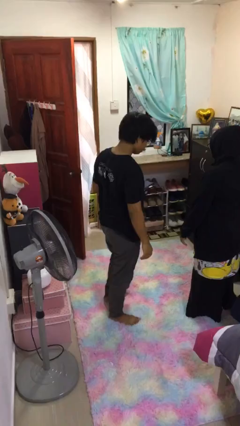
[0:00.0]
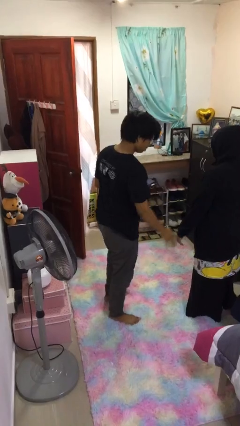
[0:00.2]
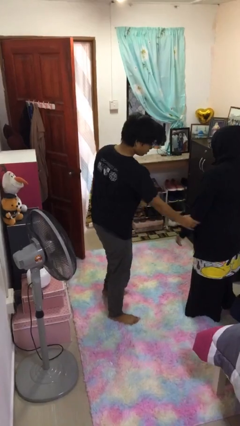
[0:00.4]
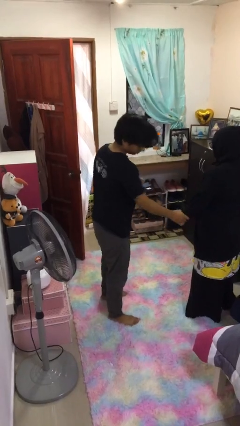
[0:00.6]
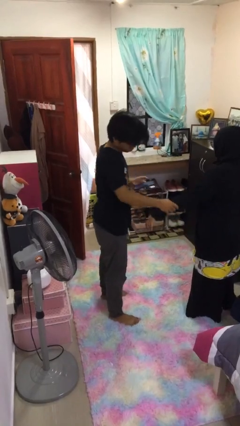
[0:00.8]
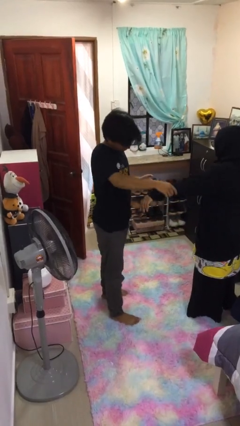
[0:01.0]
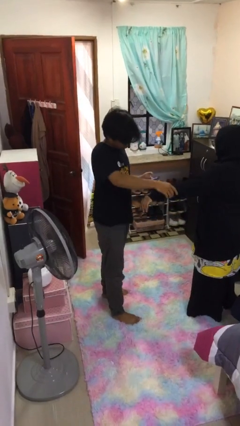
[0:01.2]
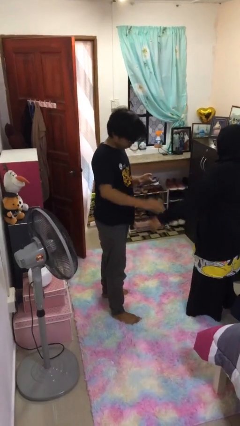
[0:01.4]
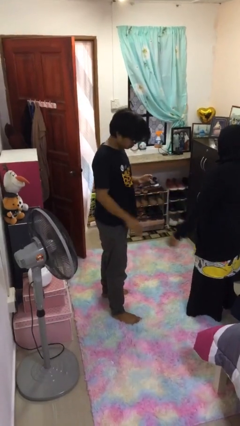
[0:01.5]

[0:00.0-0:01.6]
person grabs person by forearm

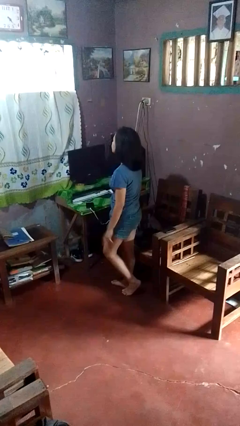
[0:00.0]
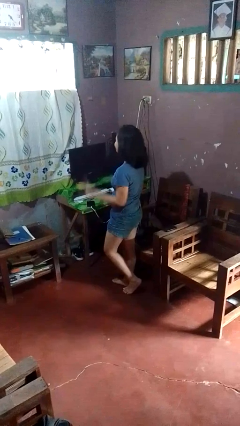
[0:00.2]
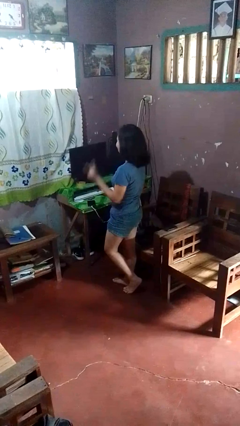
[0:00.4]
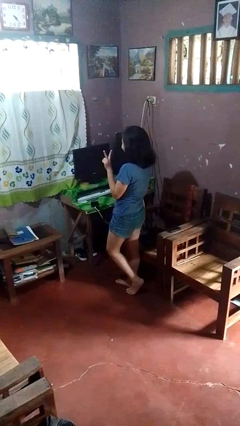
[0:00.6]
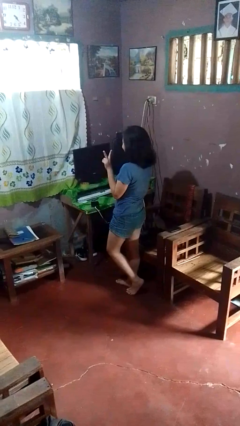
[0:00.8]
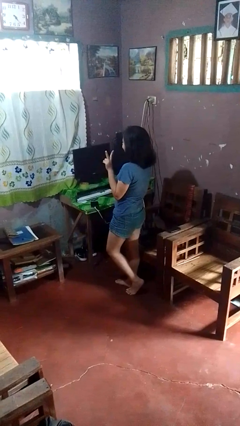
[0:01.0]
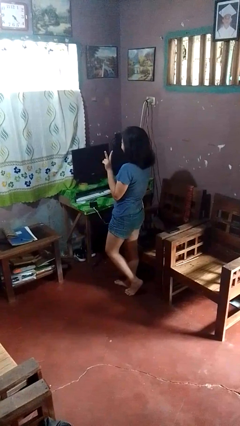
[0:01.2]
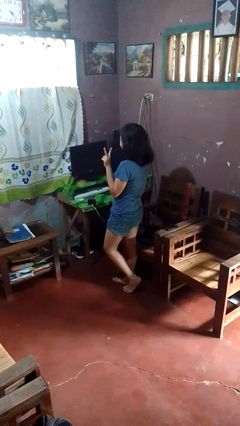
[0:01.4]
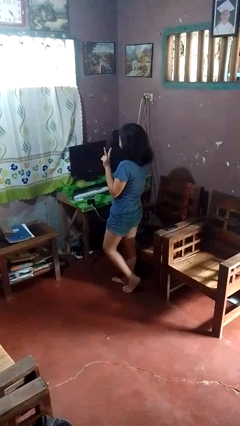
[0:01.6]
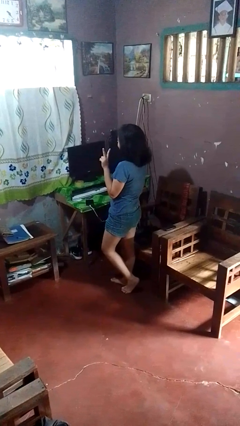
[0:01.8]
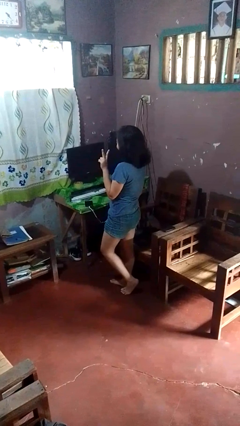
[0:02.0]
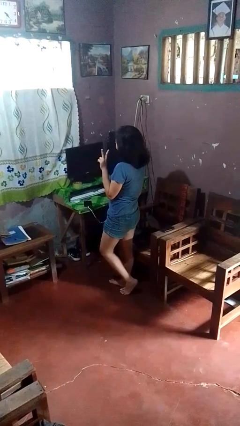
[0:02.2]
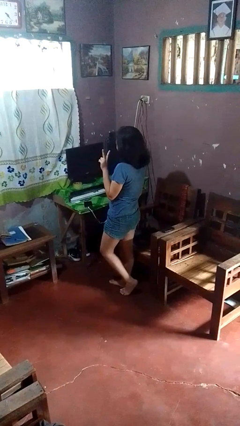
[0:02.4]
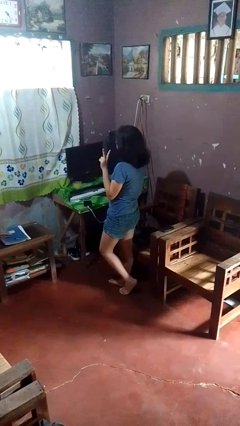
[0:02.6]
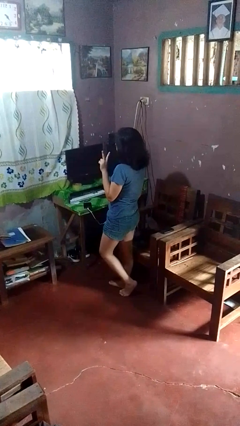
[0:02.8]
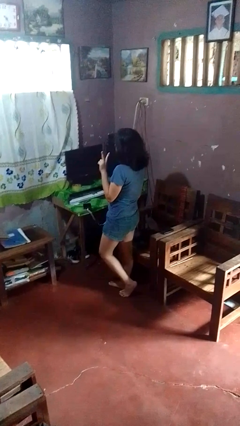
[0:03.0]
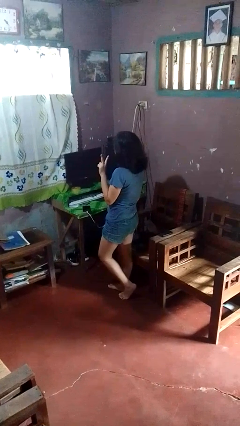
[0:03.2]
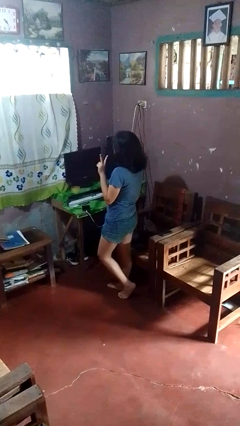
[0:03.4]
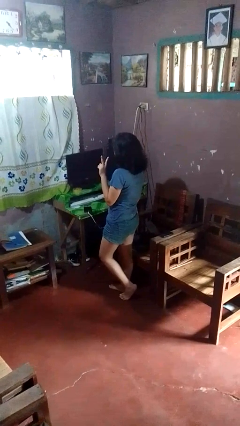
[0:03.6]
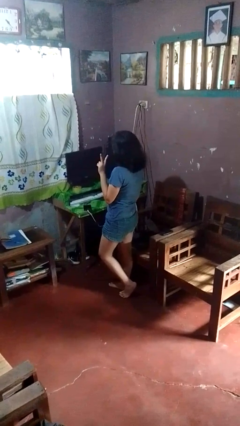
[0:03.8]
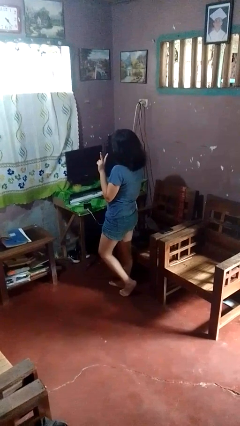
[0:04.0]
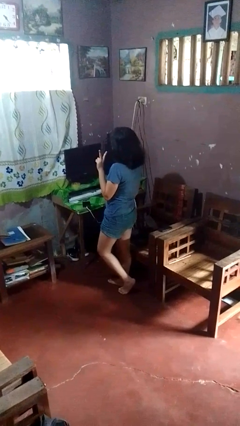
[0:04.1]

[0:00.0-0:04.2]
person gestures peace

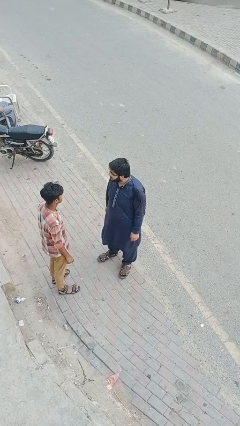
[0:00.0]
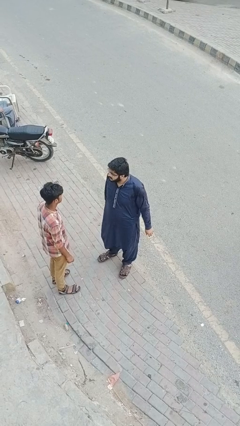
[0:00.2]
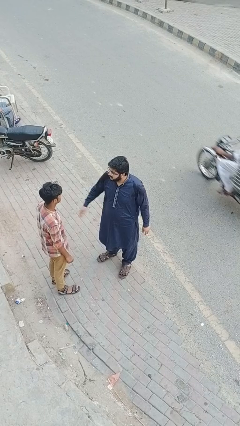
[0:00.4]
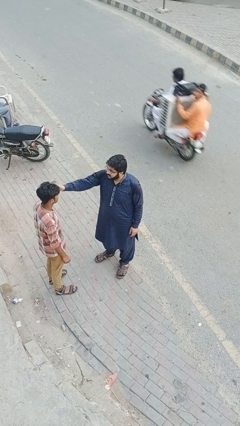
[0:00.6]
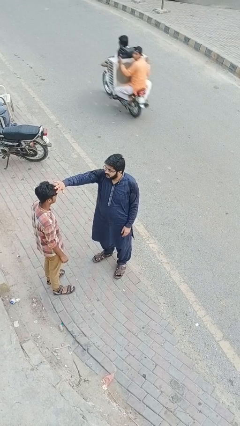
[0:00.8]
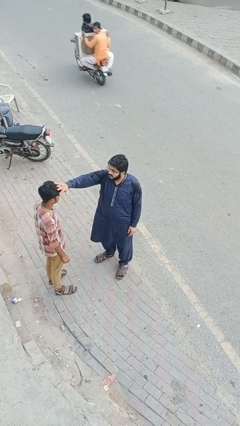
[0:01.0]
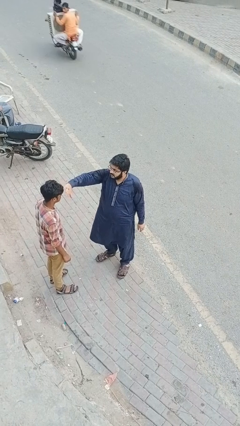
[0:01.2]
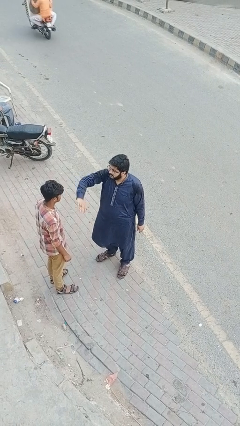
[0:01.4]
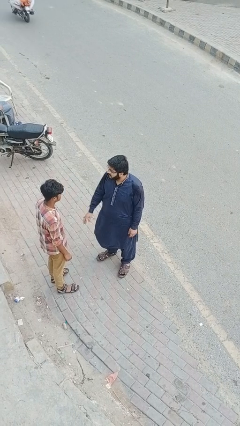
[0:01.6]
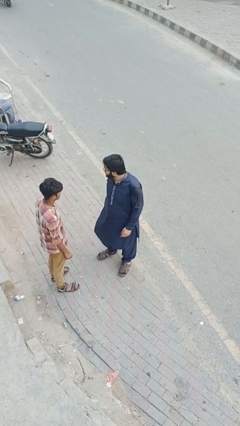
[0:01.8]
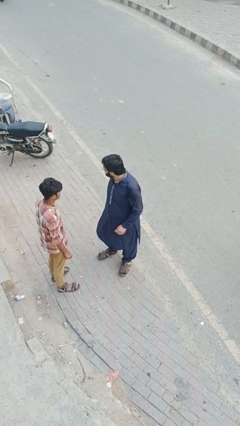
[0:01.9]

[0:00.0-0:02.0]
person grabs person by hair

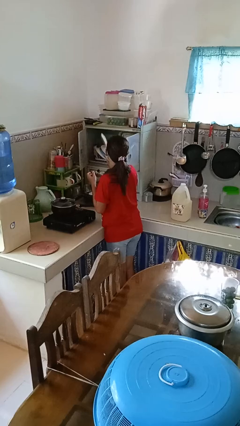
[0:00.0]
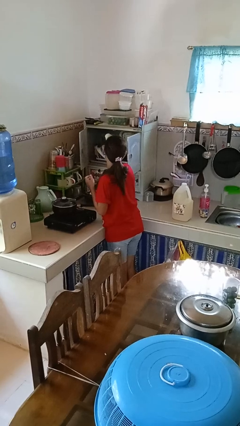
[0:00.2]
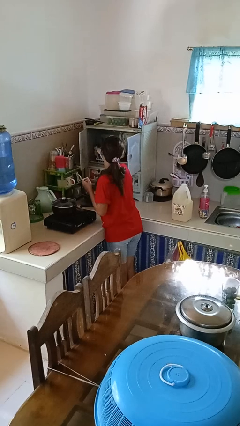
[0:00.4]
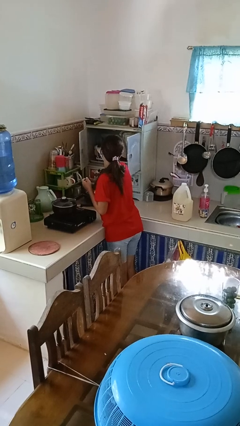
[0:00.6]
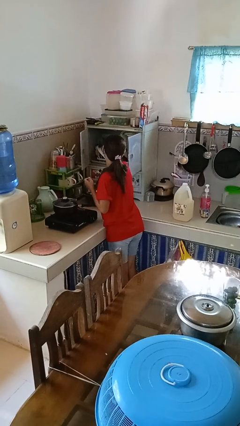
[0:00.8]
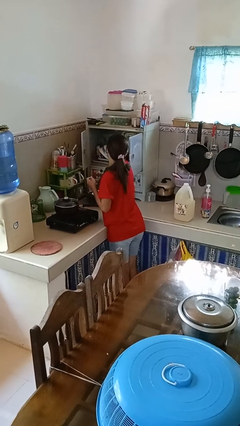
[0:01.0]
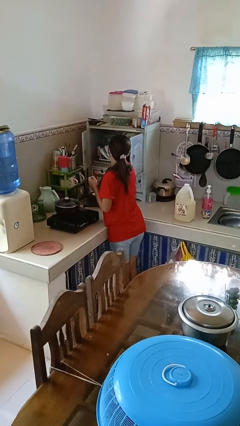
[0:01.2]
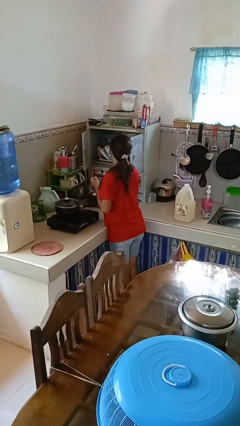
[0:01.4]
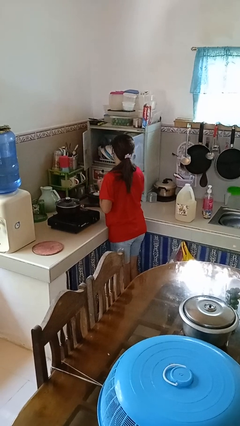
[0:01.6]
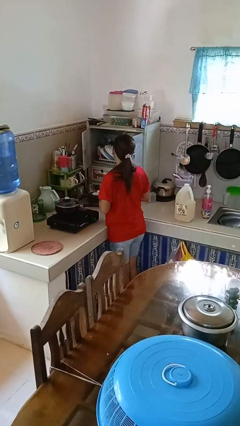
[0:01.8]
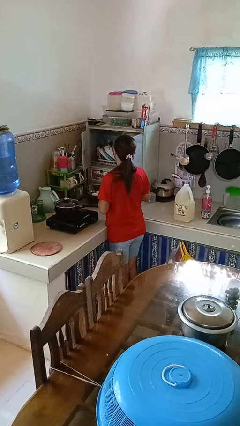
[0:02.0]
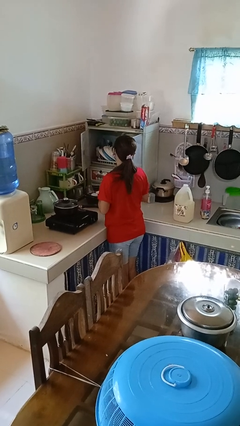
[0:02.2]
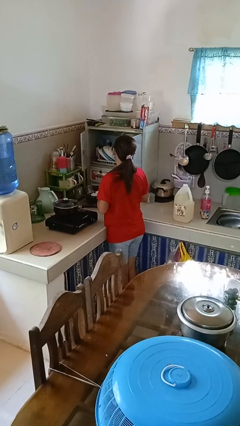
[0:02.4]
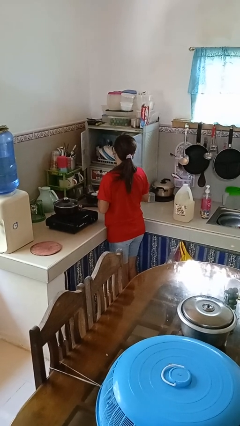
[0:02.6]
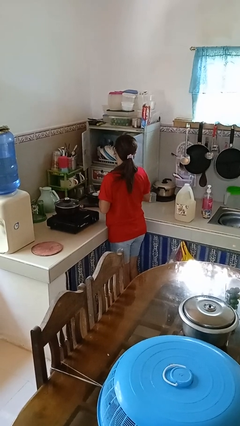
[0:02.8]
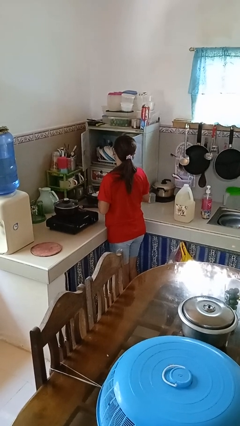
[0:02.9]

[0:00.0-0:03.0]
person puts object in cabinet

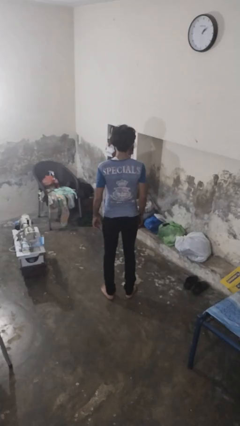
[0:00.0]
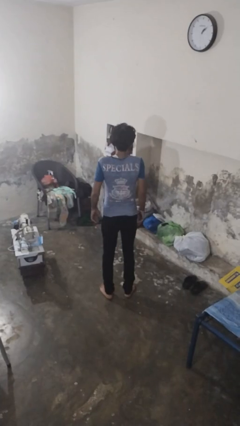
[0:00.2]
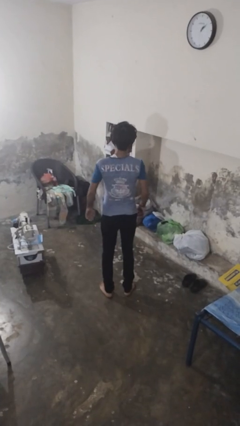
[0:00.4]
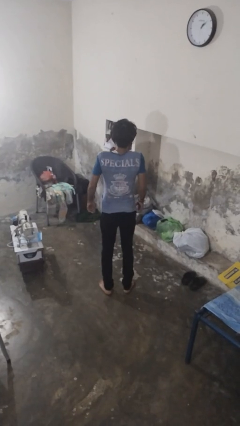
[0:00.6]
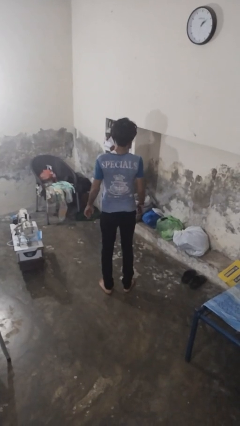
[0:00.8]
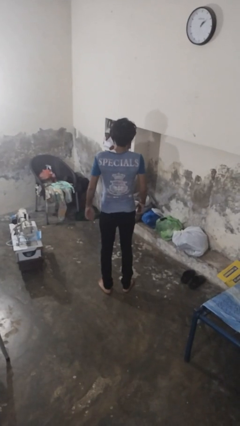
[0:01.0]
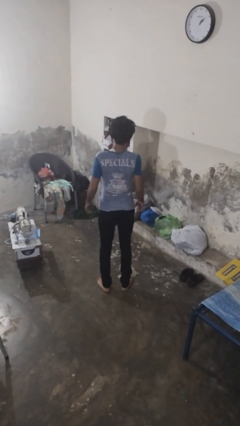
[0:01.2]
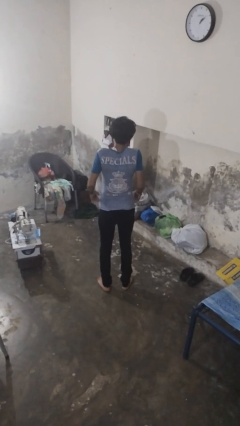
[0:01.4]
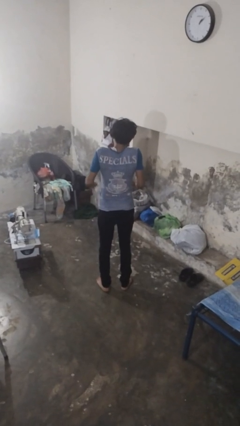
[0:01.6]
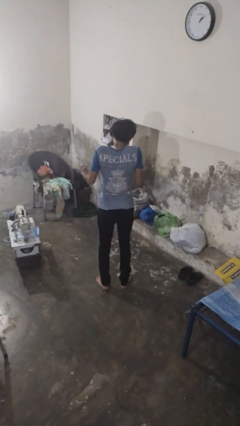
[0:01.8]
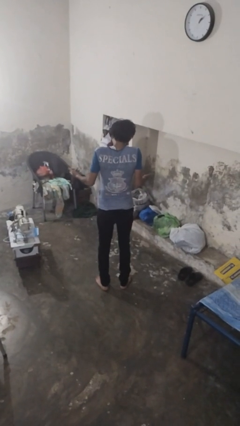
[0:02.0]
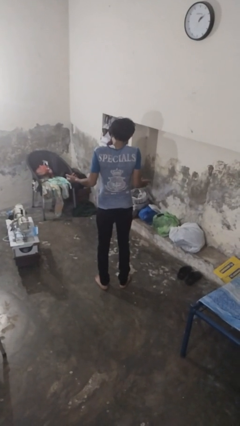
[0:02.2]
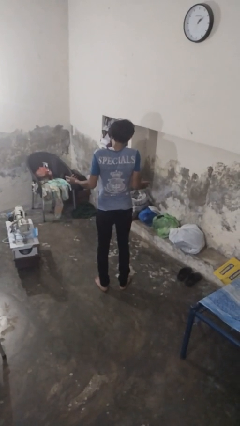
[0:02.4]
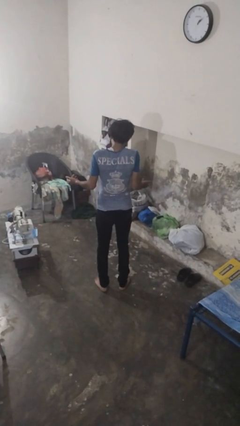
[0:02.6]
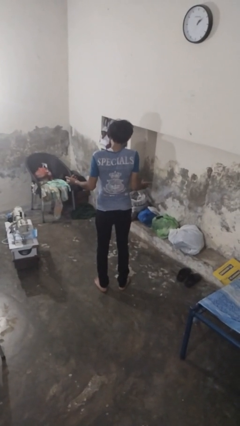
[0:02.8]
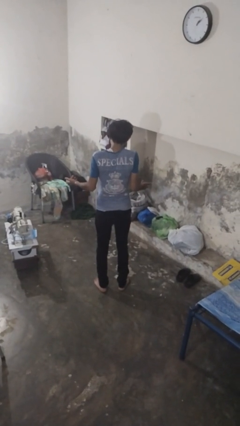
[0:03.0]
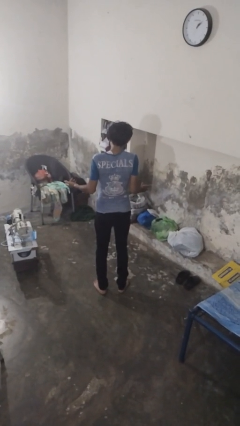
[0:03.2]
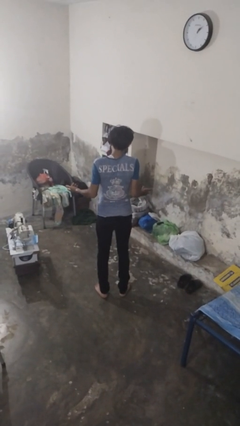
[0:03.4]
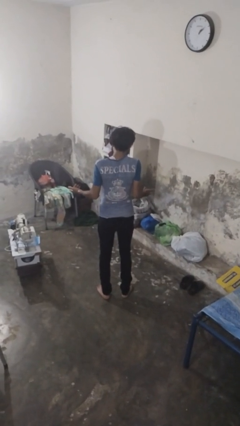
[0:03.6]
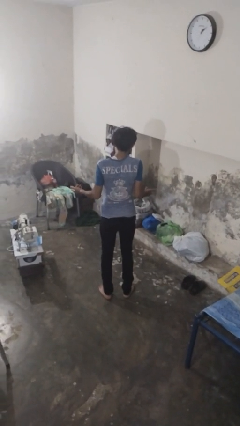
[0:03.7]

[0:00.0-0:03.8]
person shrugs

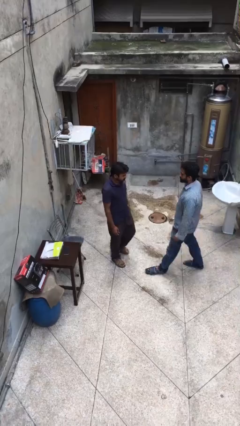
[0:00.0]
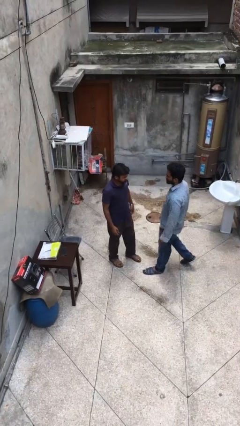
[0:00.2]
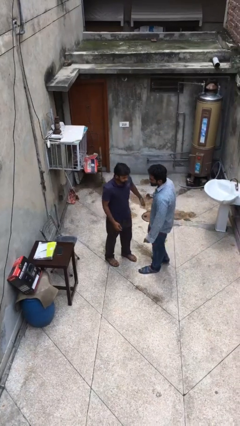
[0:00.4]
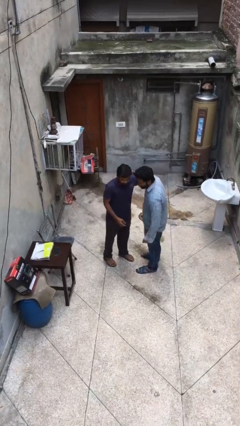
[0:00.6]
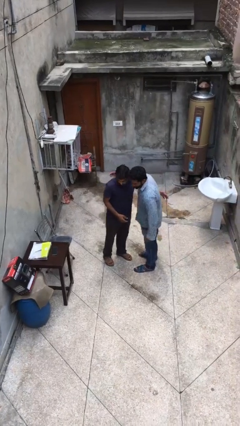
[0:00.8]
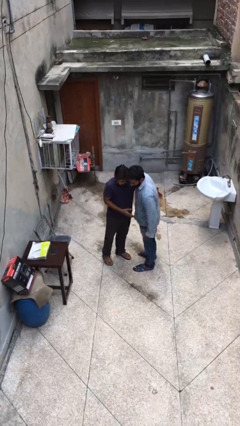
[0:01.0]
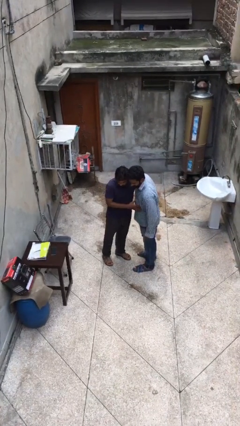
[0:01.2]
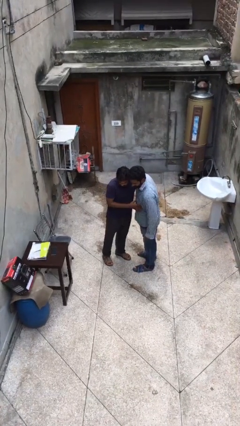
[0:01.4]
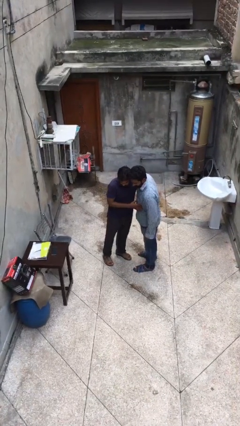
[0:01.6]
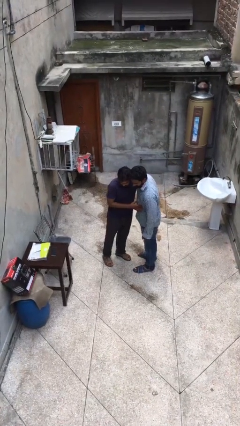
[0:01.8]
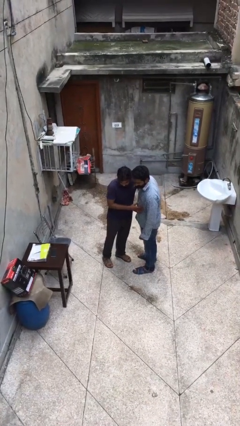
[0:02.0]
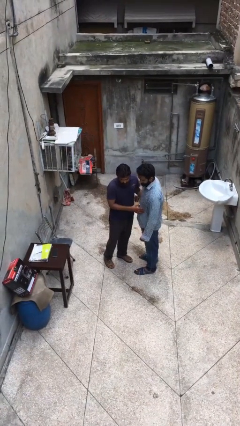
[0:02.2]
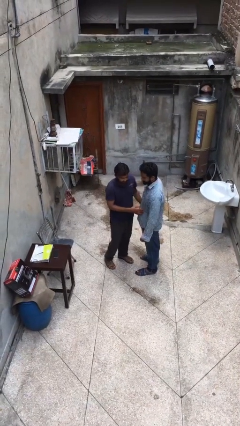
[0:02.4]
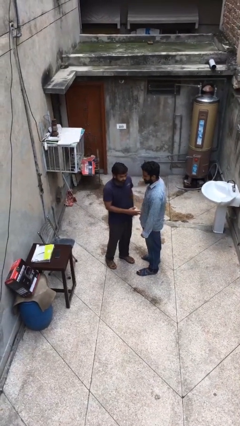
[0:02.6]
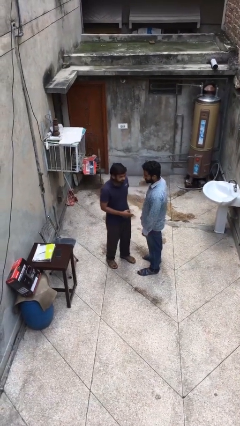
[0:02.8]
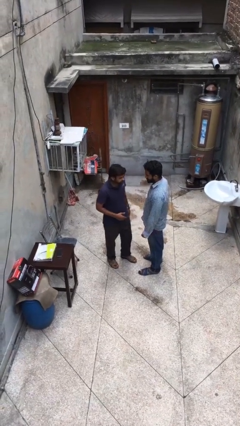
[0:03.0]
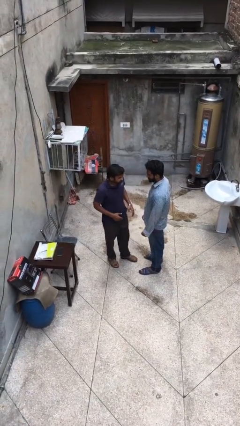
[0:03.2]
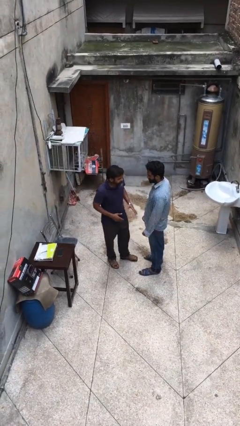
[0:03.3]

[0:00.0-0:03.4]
person embraces person
